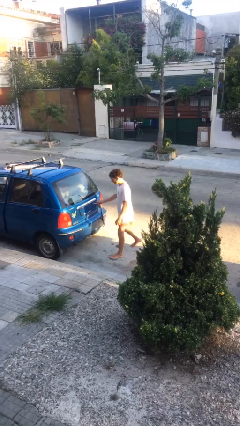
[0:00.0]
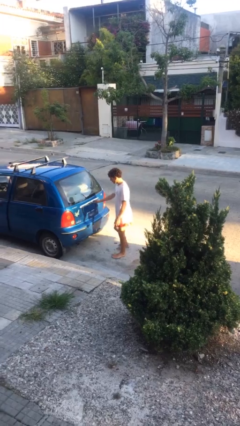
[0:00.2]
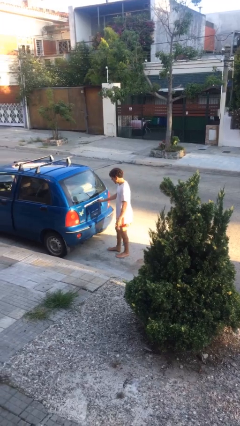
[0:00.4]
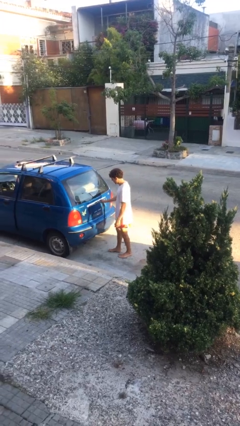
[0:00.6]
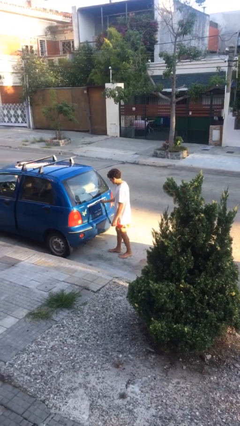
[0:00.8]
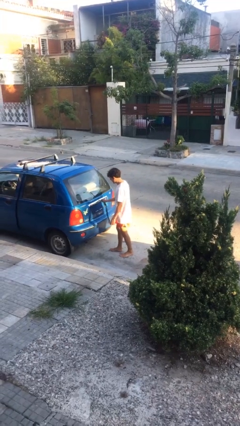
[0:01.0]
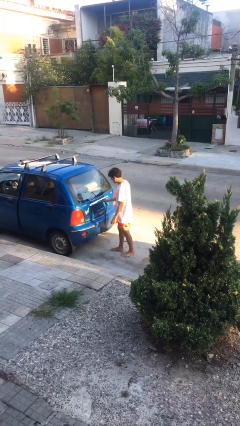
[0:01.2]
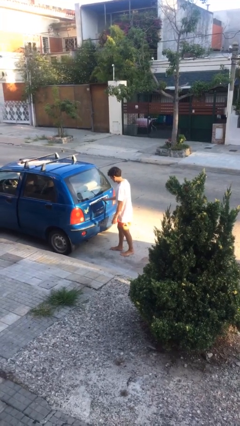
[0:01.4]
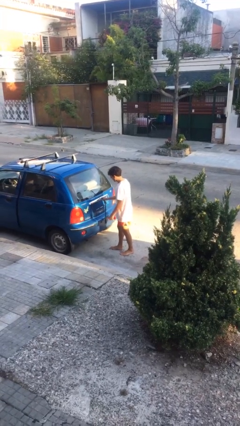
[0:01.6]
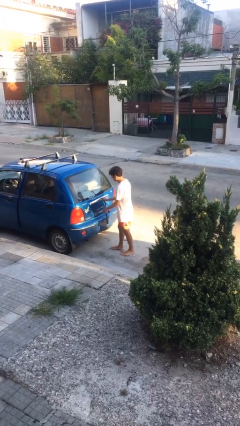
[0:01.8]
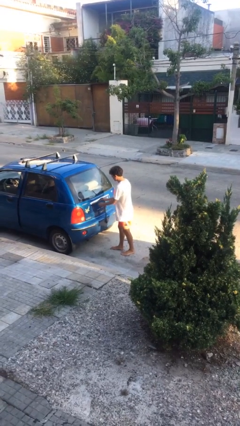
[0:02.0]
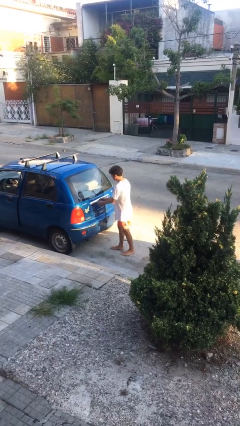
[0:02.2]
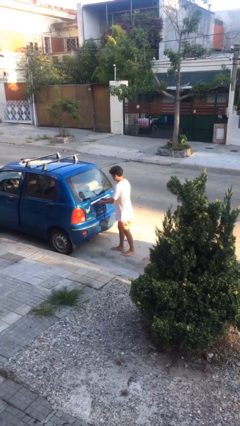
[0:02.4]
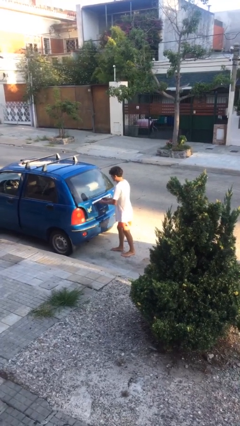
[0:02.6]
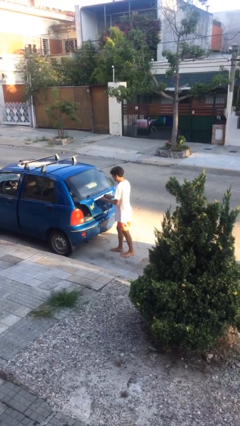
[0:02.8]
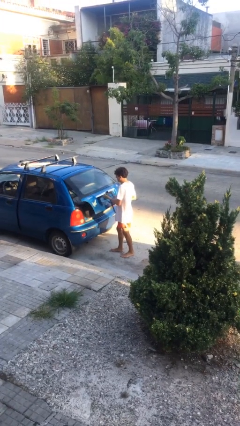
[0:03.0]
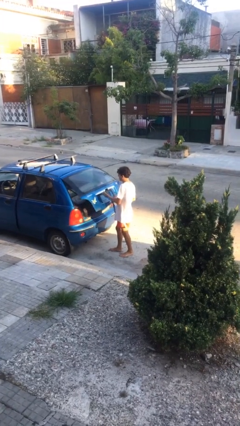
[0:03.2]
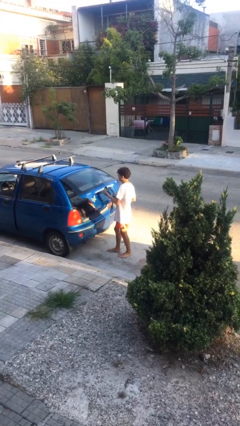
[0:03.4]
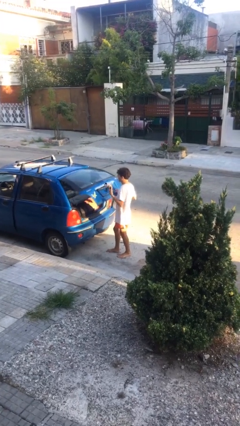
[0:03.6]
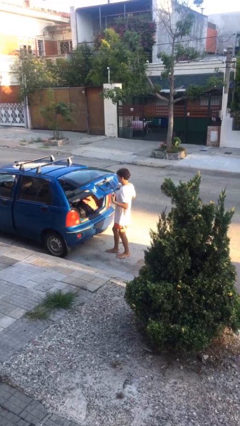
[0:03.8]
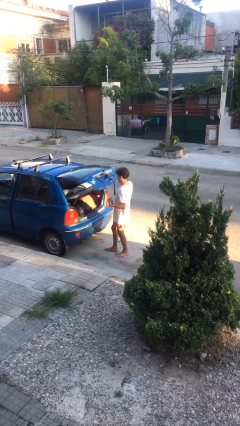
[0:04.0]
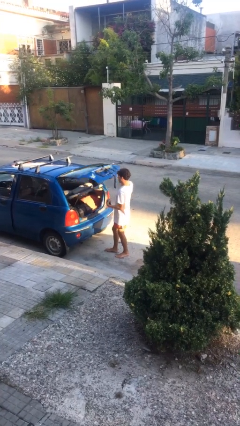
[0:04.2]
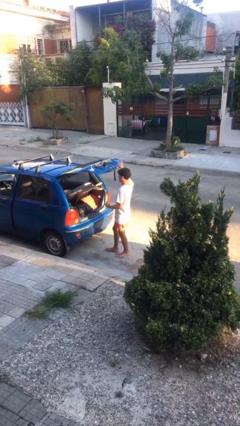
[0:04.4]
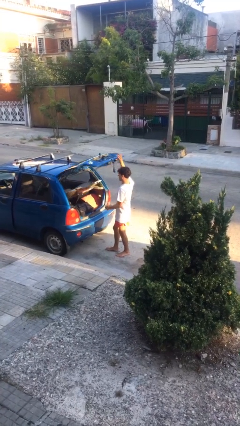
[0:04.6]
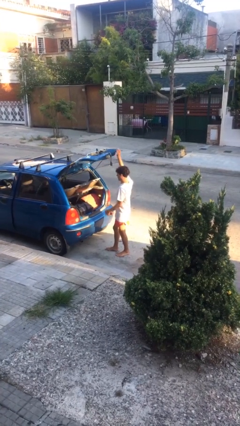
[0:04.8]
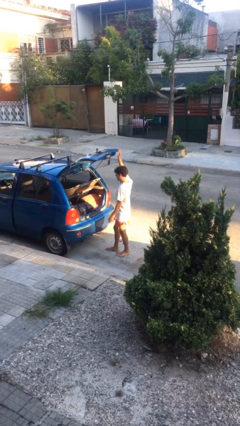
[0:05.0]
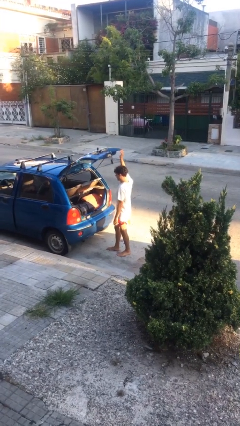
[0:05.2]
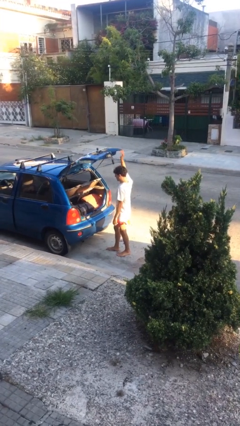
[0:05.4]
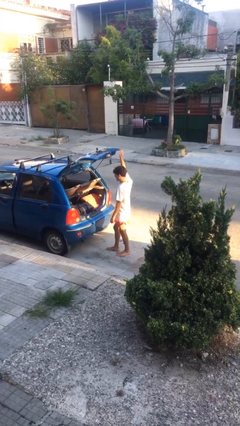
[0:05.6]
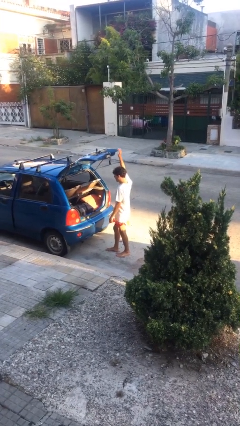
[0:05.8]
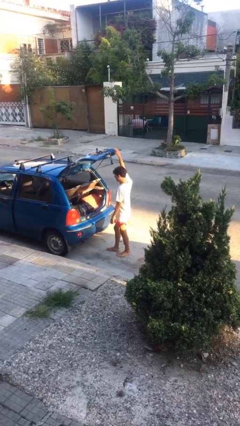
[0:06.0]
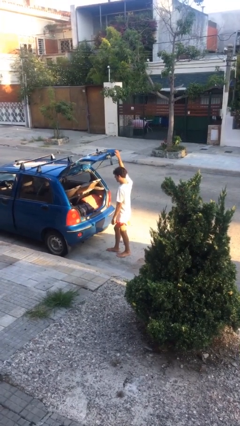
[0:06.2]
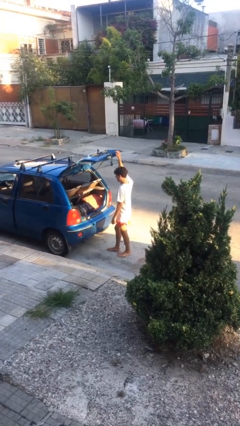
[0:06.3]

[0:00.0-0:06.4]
person opens car trunk

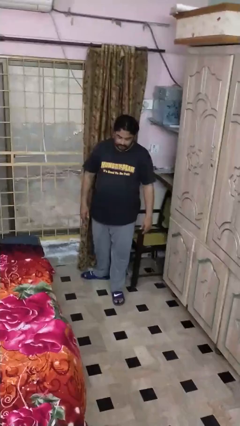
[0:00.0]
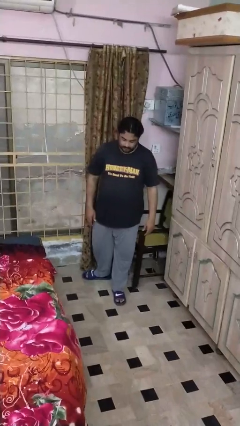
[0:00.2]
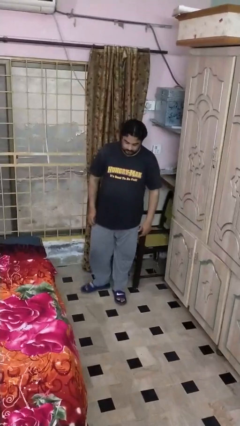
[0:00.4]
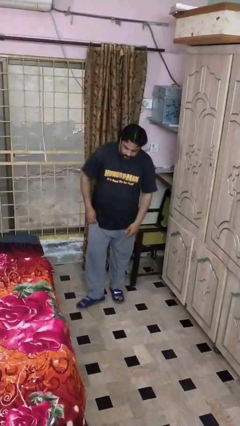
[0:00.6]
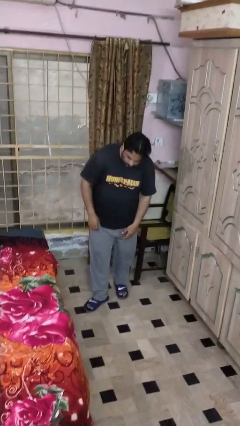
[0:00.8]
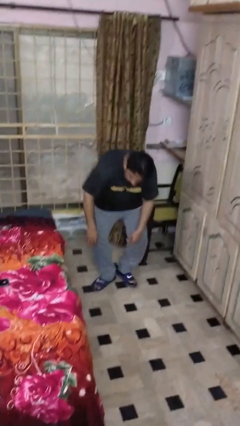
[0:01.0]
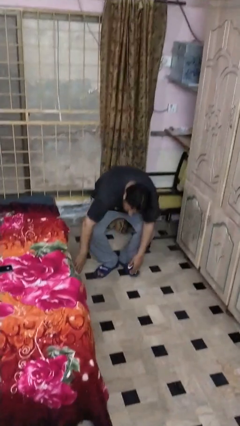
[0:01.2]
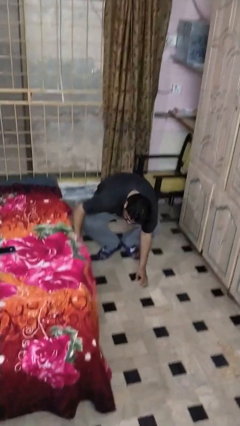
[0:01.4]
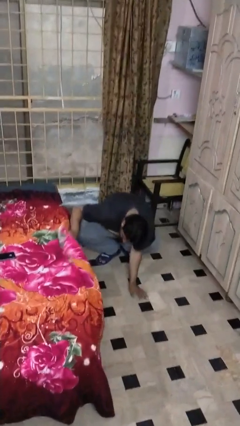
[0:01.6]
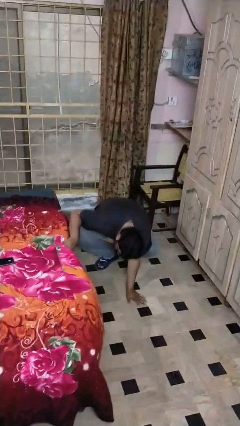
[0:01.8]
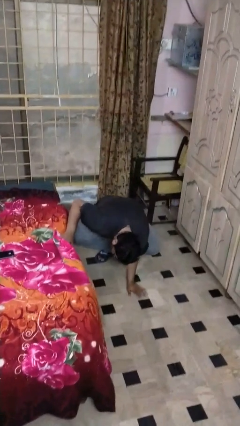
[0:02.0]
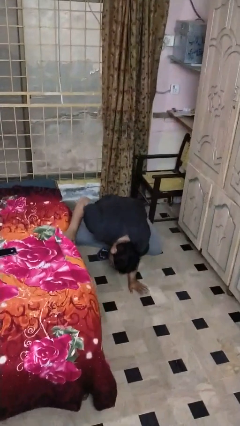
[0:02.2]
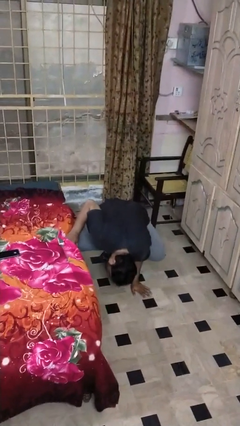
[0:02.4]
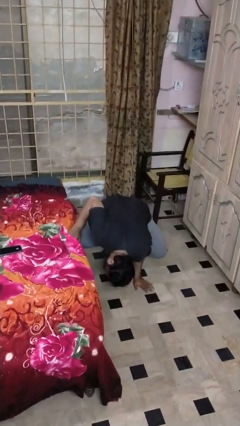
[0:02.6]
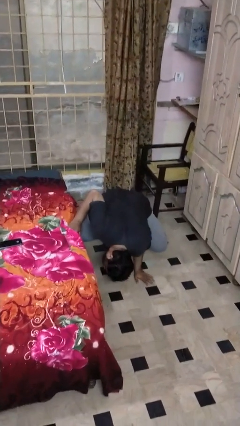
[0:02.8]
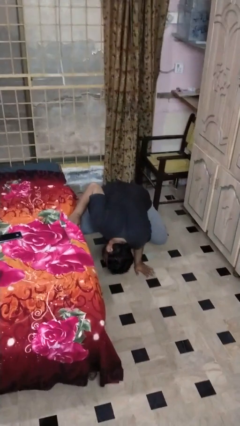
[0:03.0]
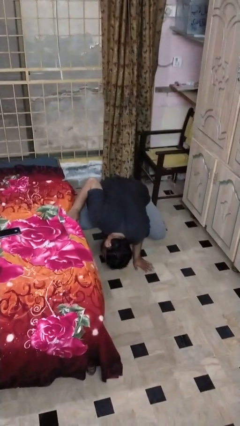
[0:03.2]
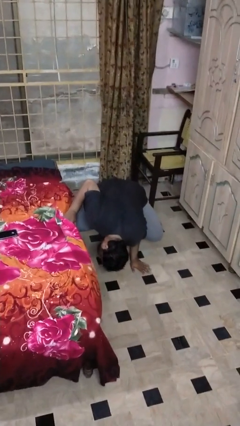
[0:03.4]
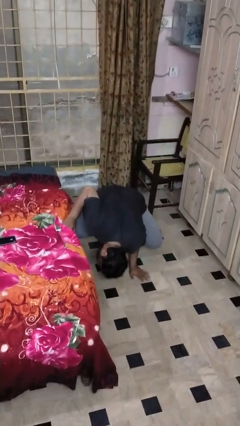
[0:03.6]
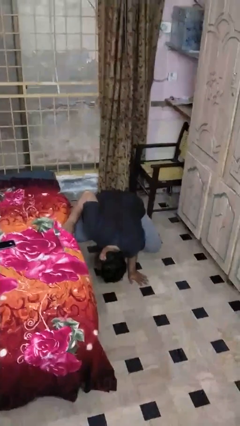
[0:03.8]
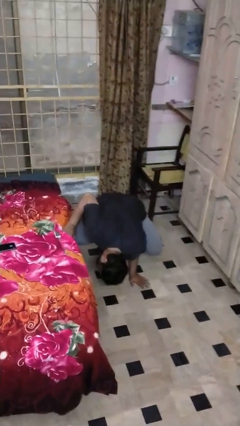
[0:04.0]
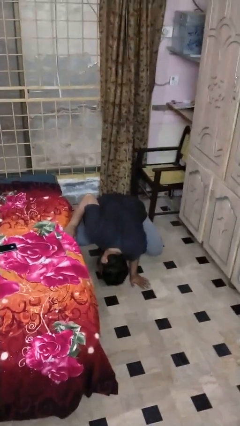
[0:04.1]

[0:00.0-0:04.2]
person searches under bed

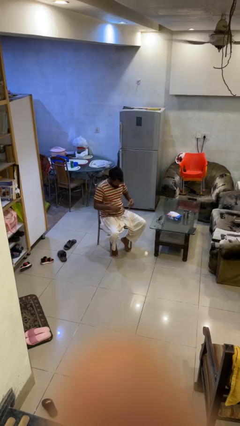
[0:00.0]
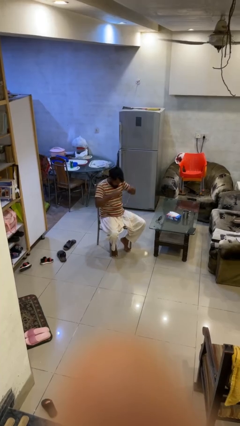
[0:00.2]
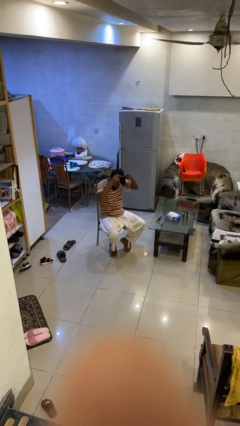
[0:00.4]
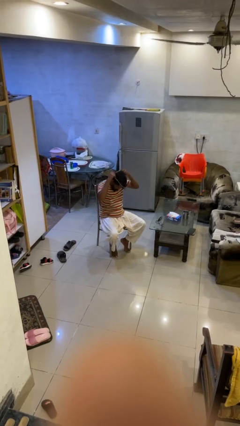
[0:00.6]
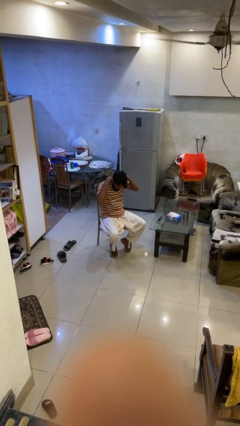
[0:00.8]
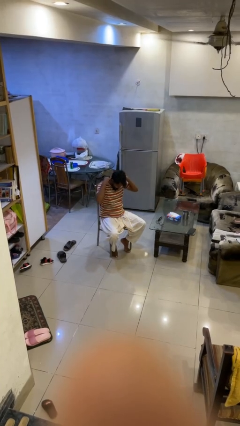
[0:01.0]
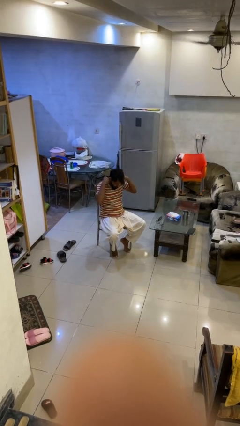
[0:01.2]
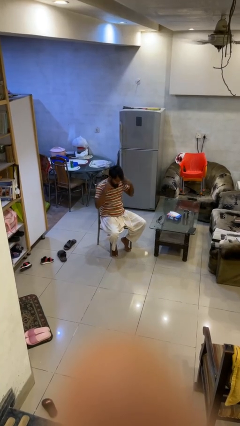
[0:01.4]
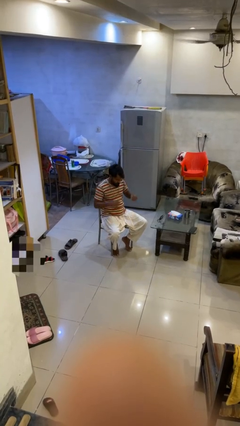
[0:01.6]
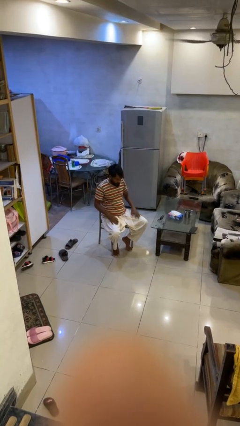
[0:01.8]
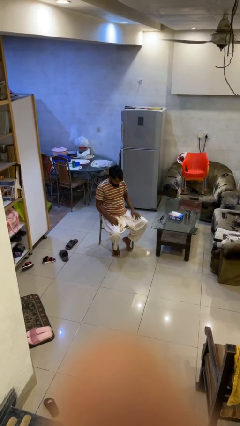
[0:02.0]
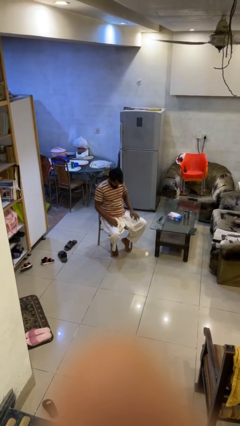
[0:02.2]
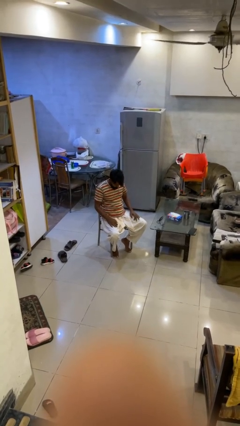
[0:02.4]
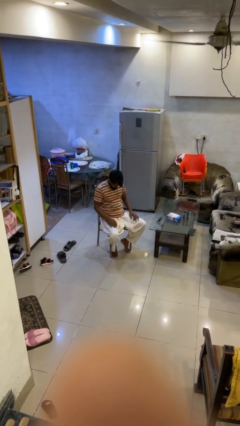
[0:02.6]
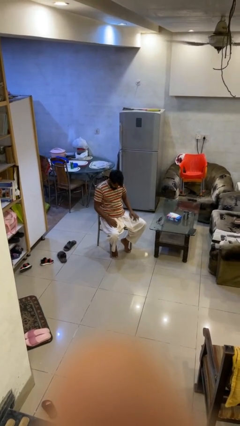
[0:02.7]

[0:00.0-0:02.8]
person puts on necklace

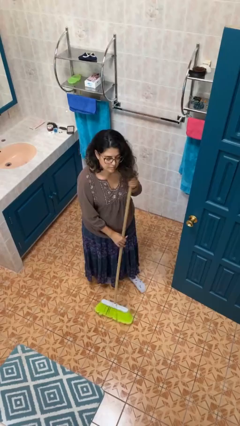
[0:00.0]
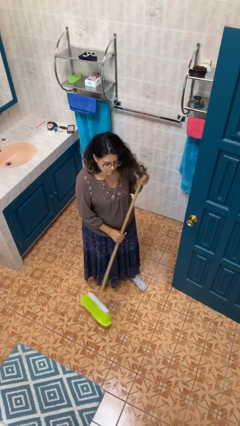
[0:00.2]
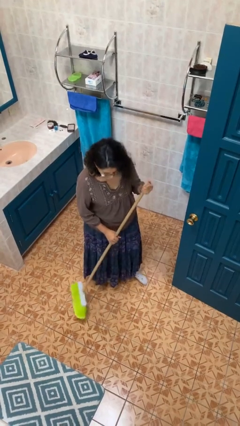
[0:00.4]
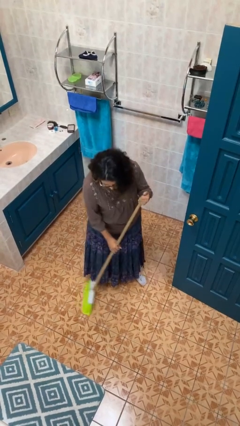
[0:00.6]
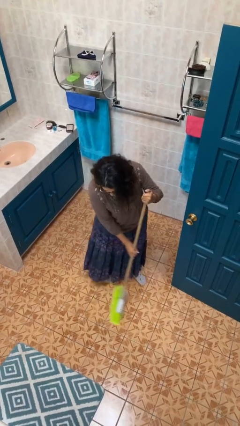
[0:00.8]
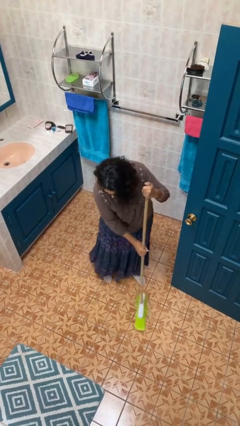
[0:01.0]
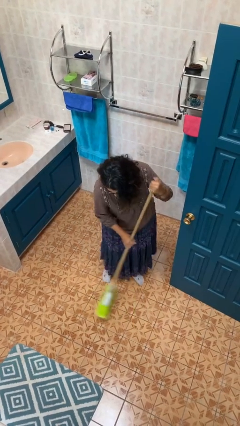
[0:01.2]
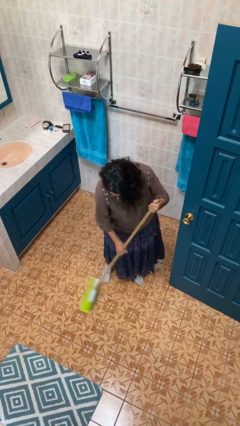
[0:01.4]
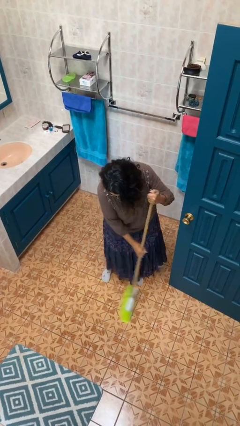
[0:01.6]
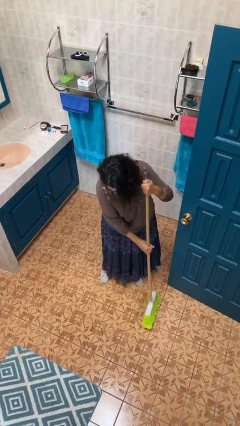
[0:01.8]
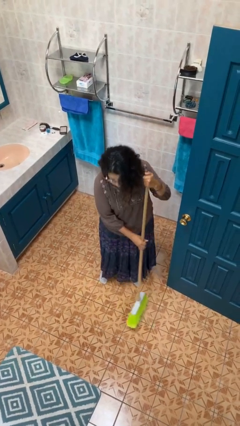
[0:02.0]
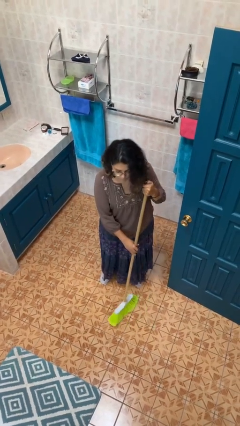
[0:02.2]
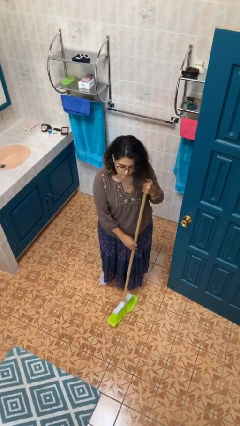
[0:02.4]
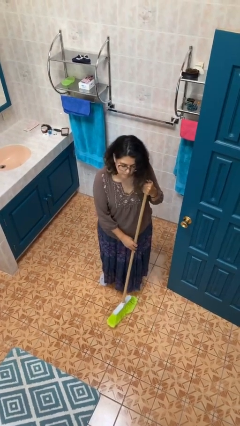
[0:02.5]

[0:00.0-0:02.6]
person sweeps floor

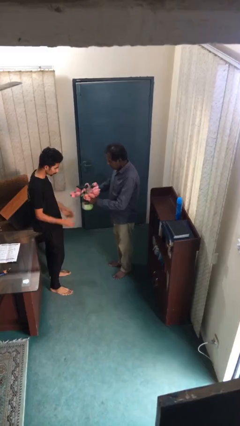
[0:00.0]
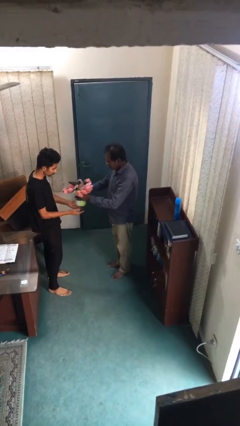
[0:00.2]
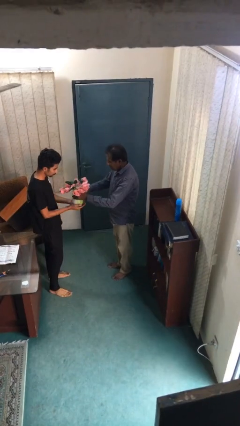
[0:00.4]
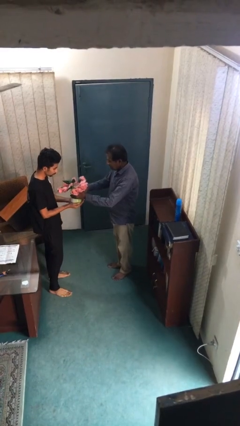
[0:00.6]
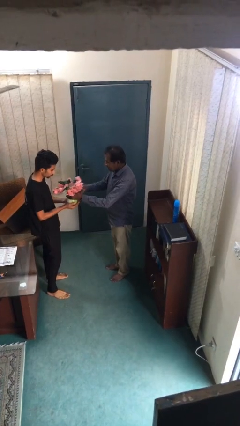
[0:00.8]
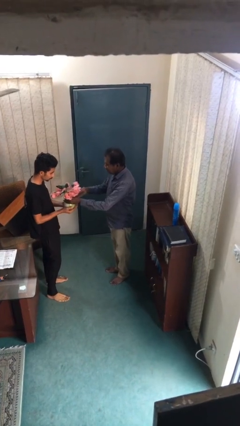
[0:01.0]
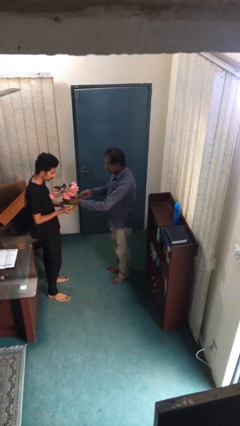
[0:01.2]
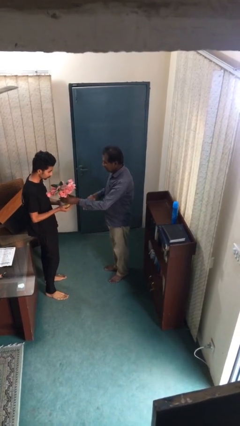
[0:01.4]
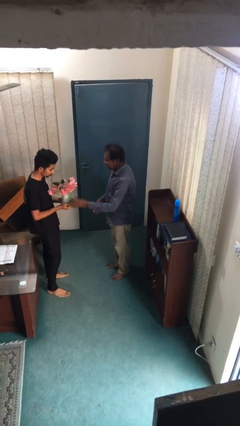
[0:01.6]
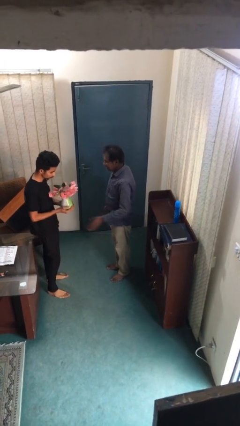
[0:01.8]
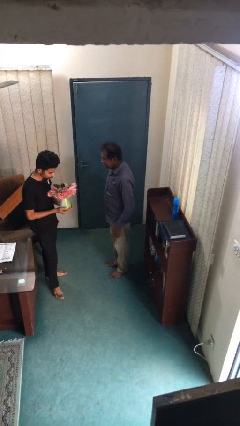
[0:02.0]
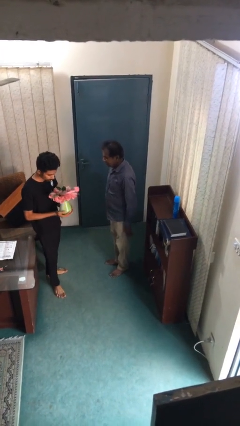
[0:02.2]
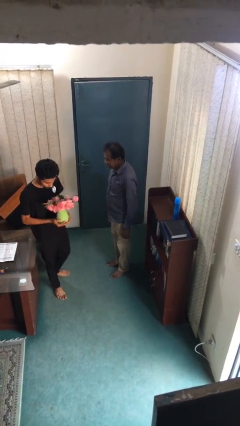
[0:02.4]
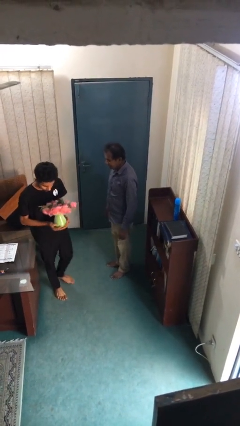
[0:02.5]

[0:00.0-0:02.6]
person transfers object to person
